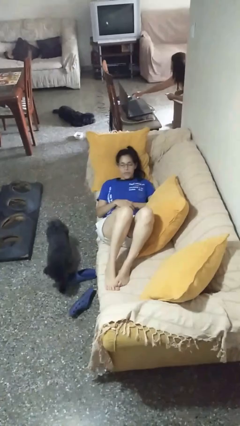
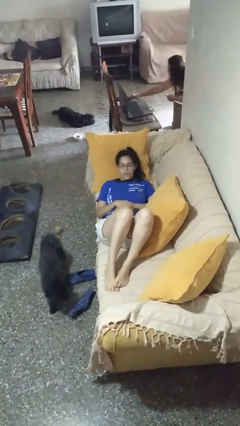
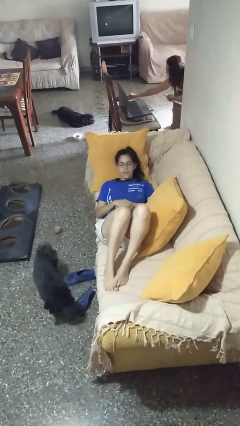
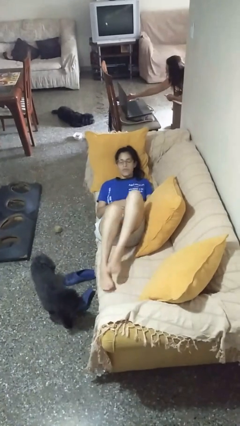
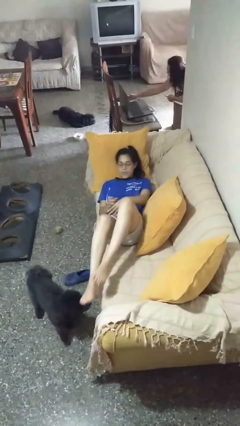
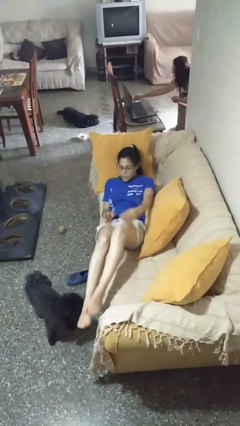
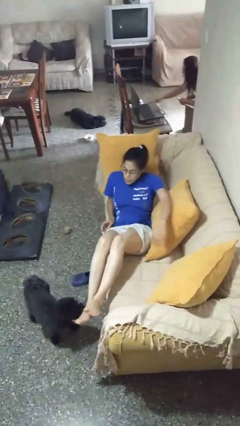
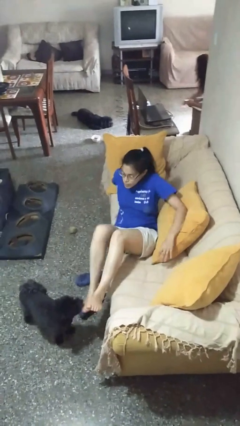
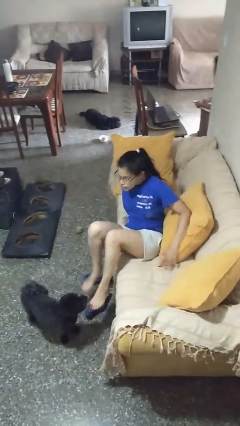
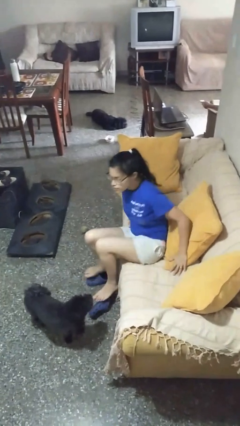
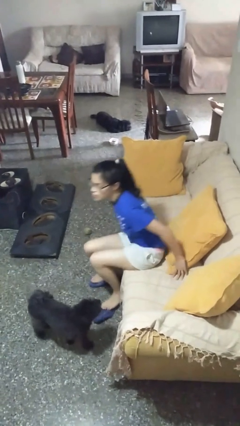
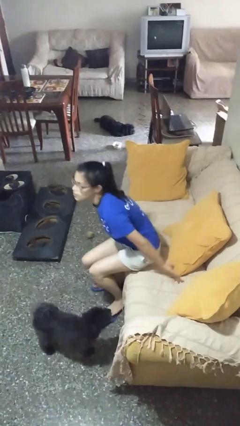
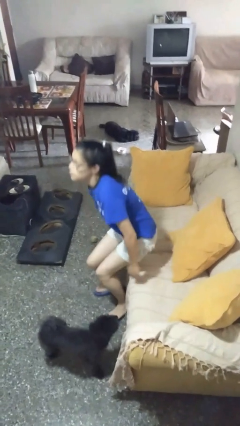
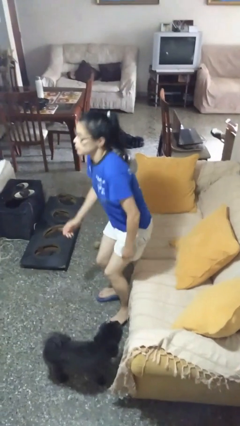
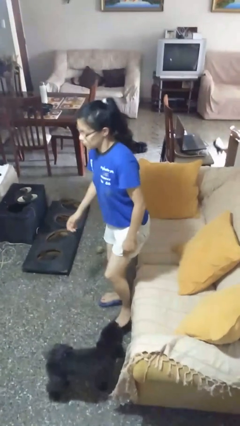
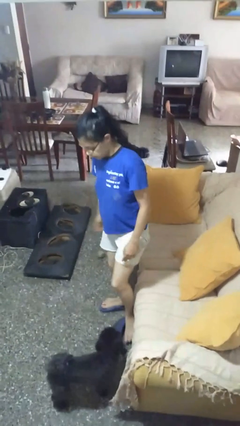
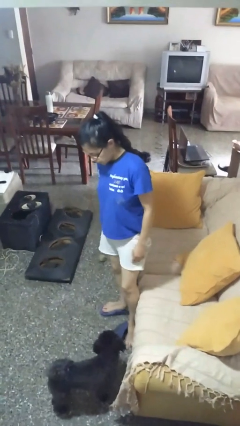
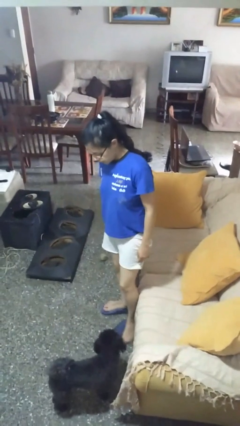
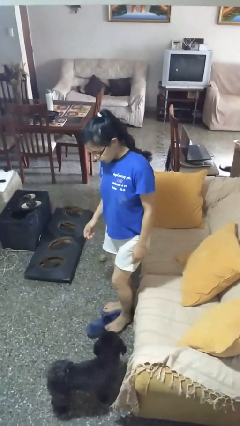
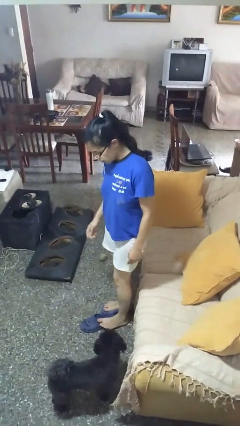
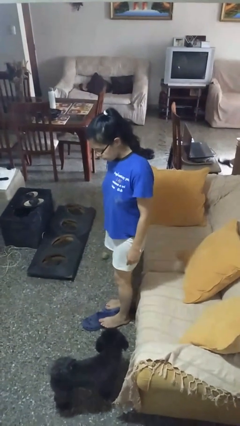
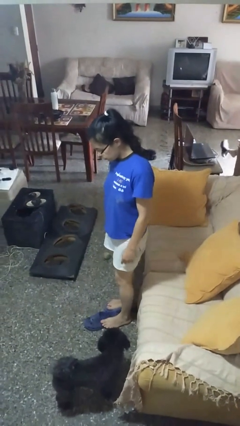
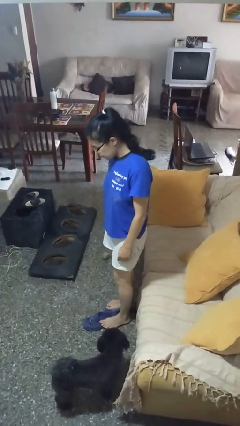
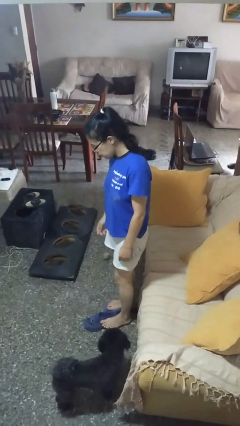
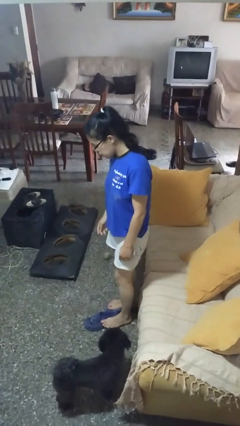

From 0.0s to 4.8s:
person stands up

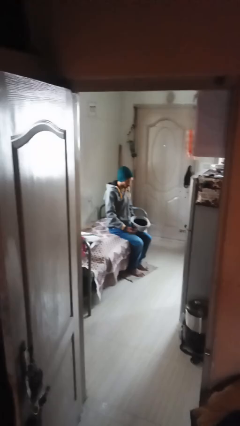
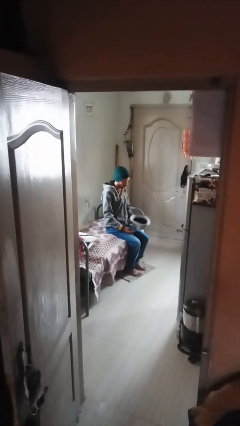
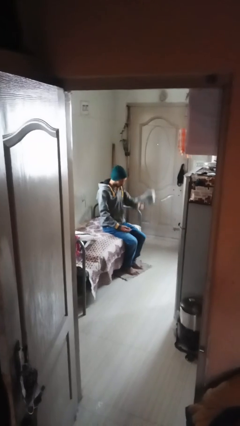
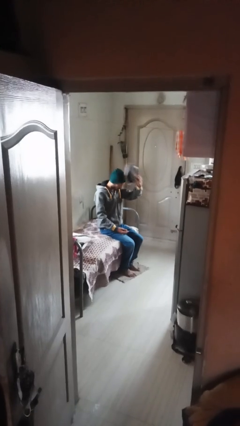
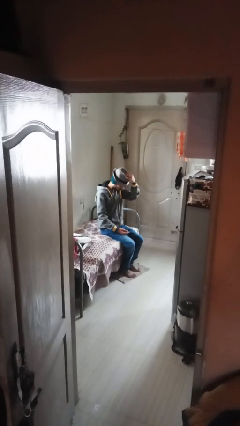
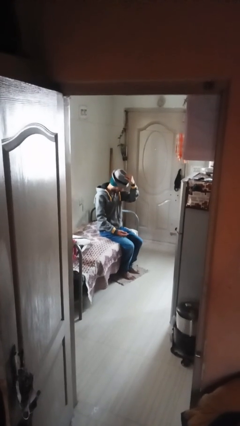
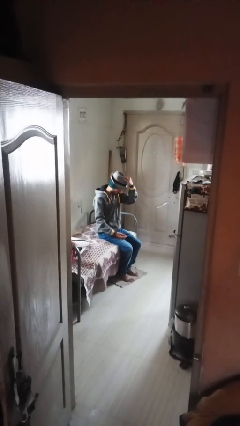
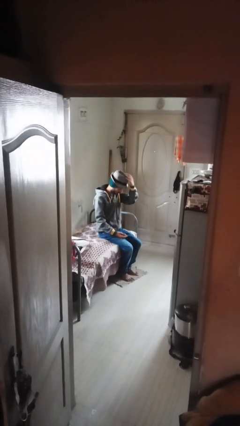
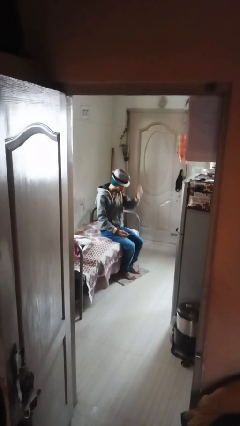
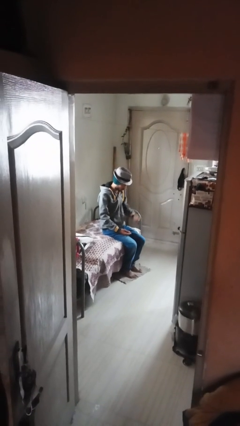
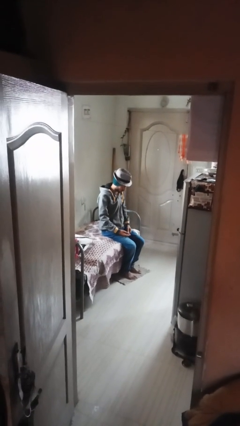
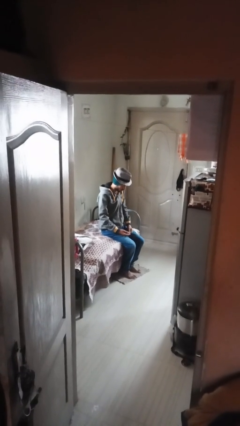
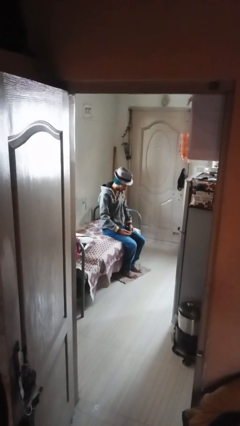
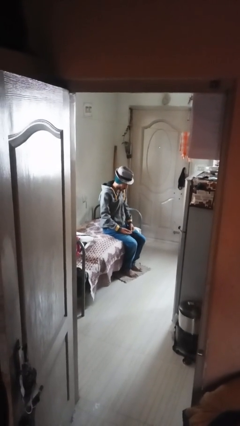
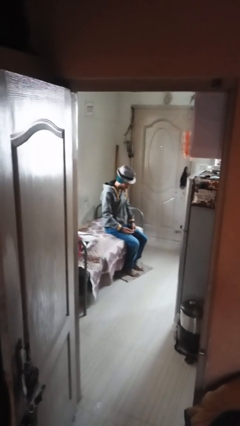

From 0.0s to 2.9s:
person puts on hat

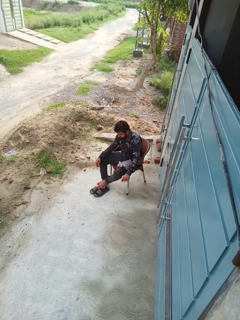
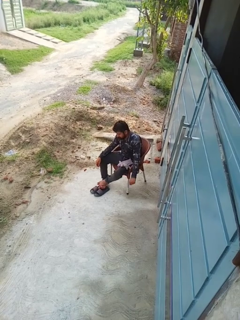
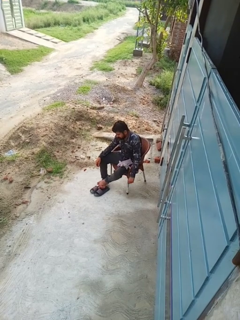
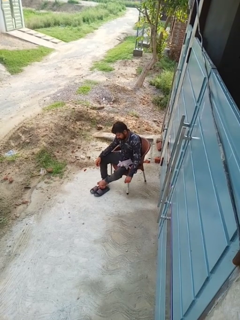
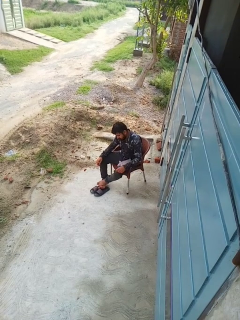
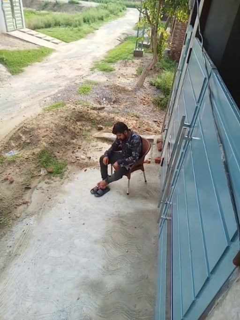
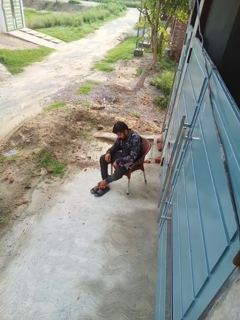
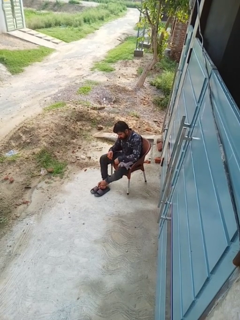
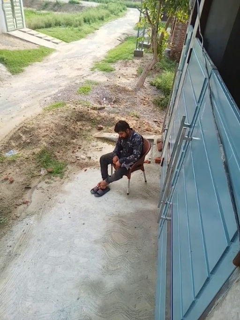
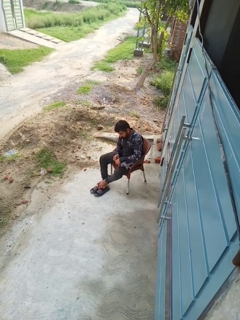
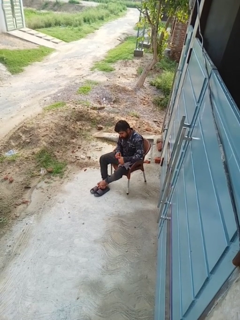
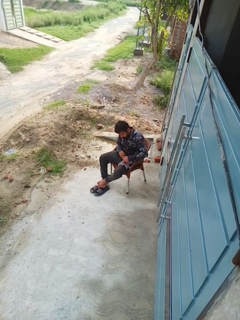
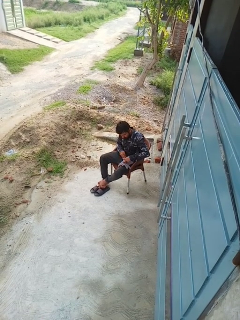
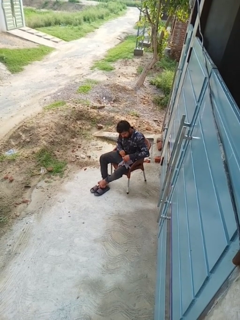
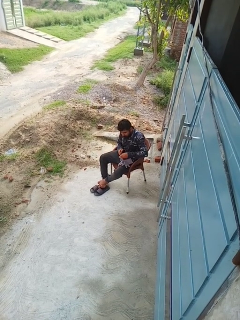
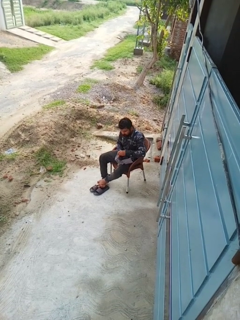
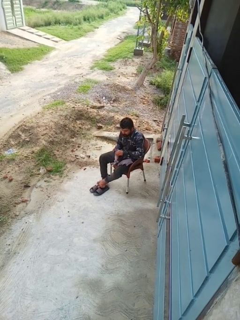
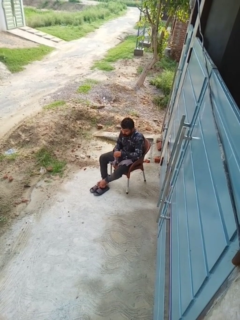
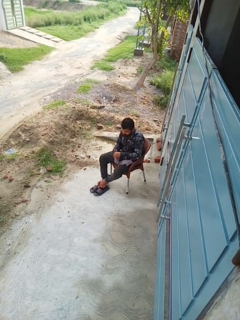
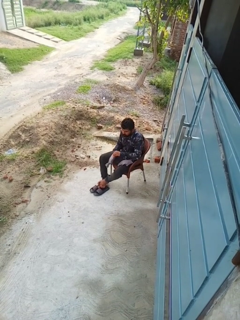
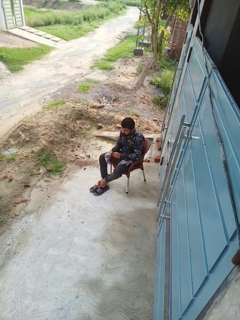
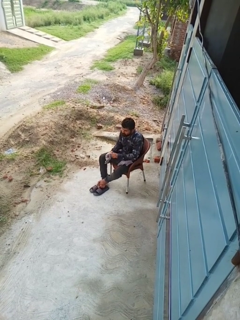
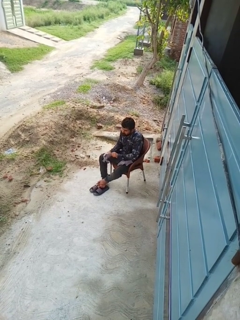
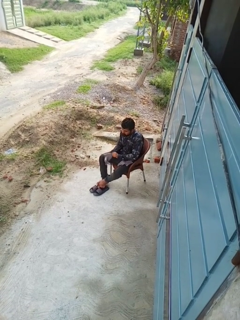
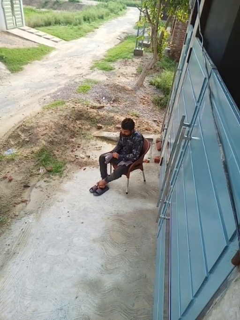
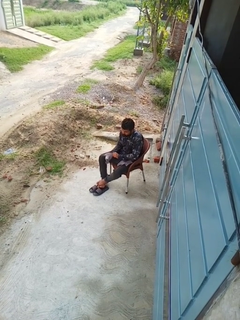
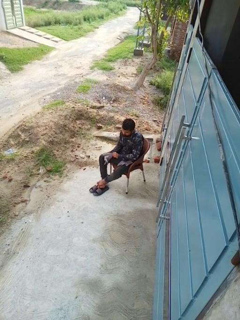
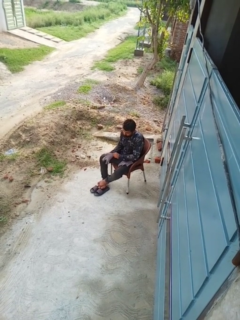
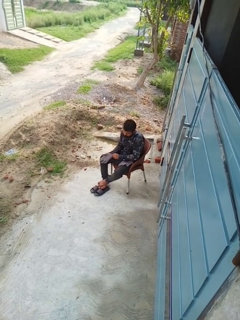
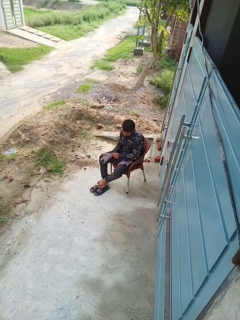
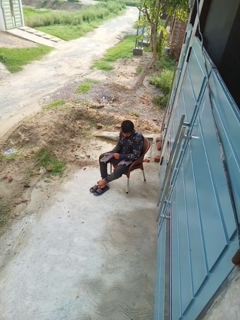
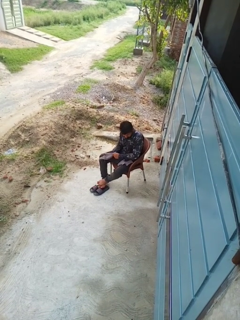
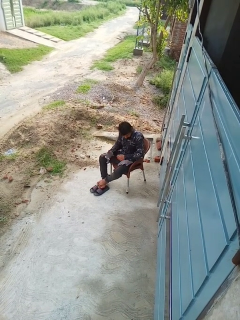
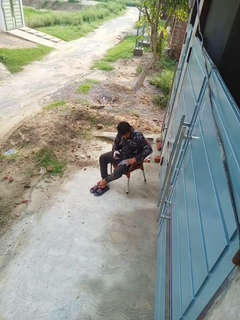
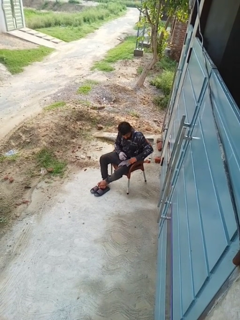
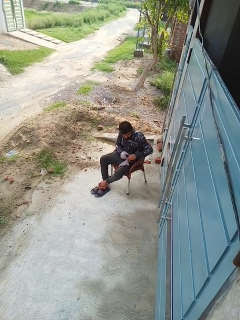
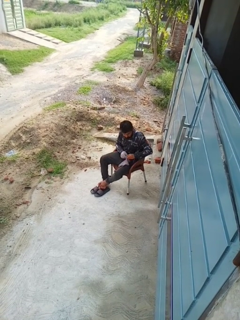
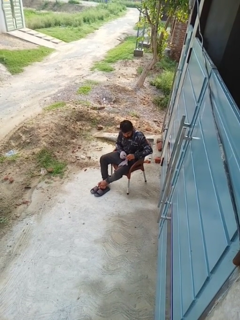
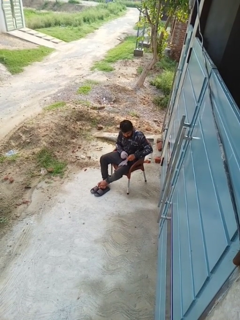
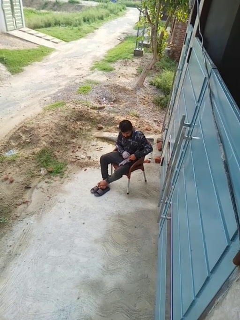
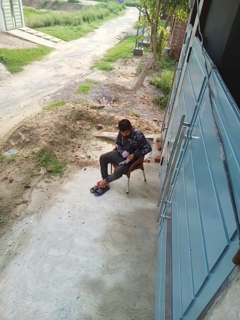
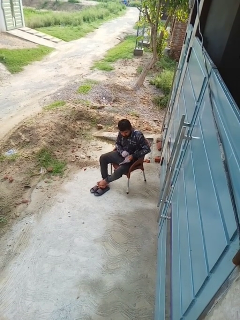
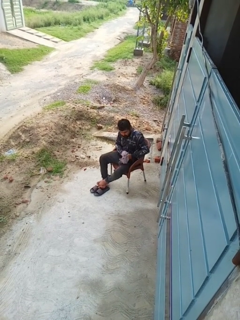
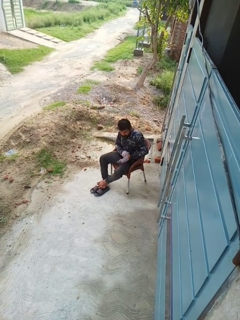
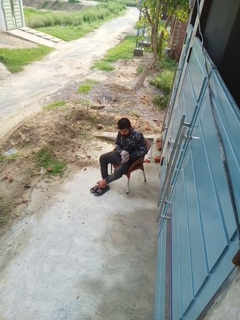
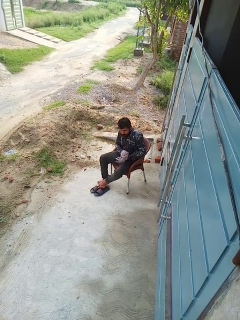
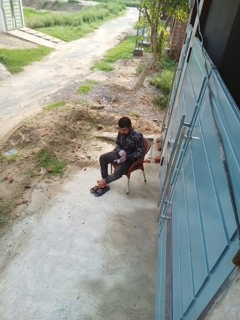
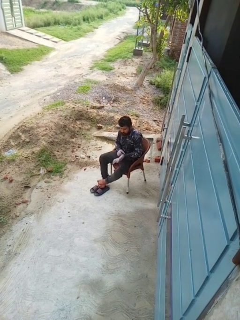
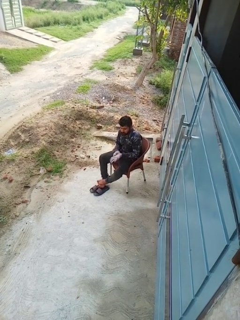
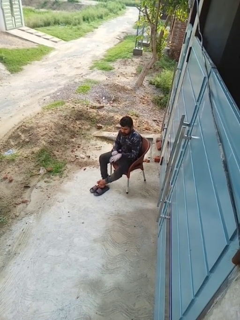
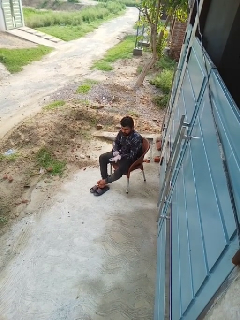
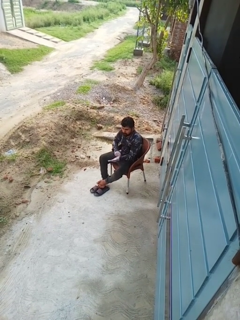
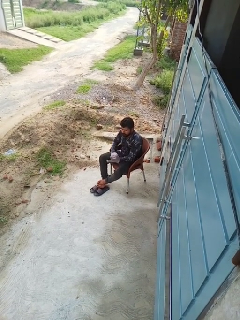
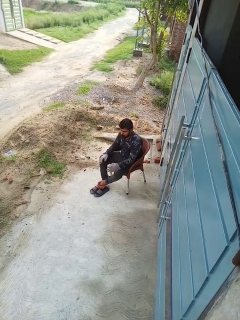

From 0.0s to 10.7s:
person puts on gloves

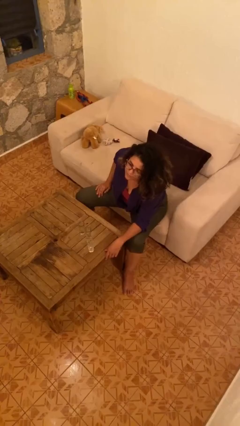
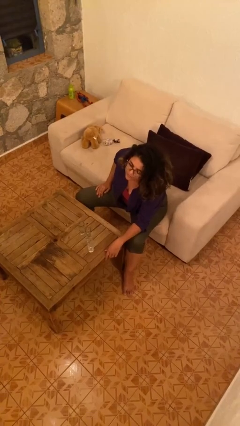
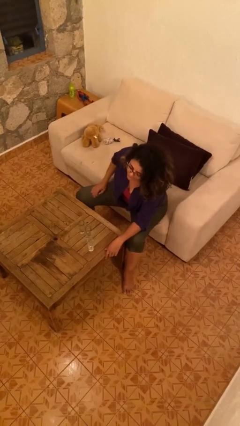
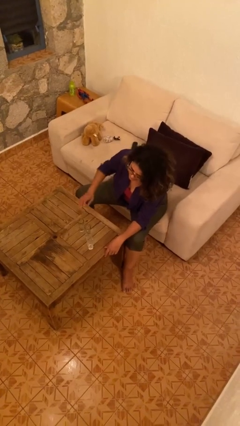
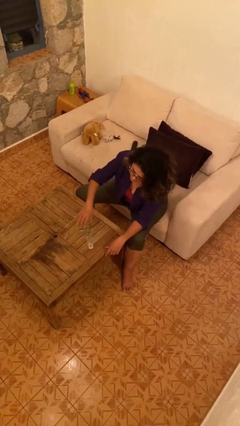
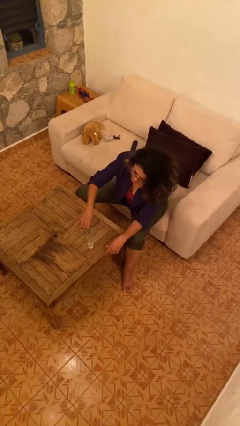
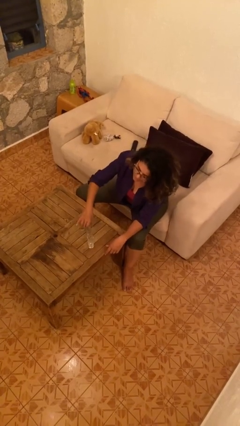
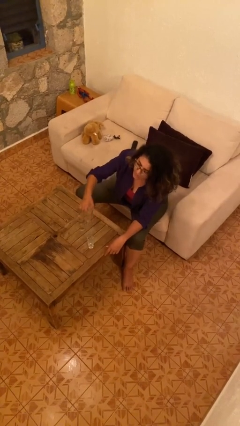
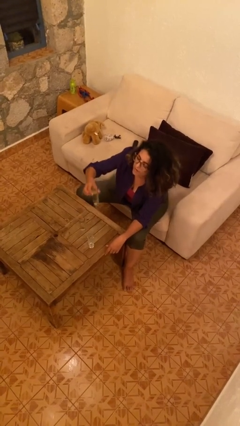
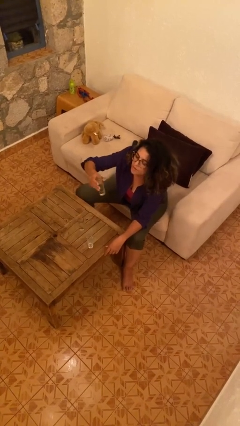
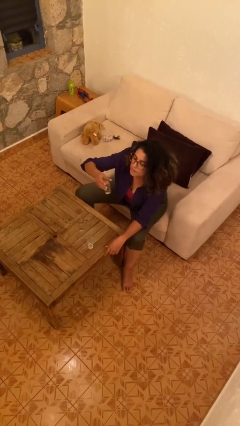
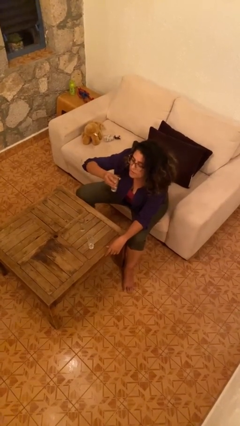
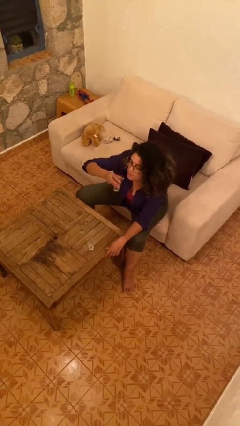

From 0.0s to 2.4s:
person picks up object from table
